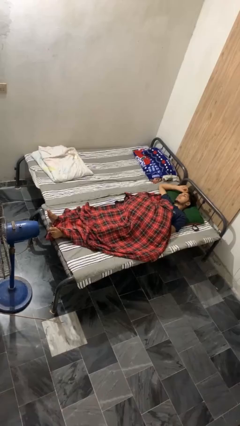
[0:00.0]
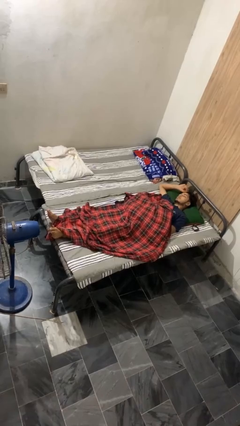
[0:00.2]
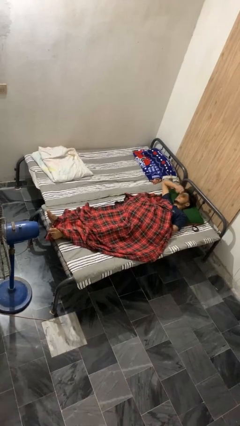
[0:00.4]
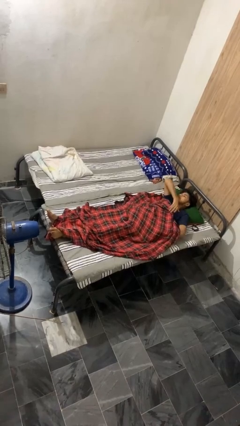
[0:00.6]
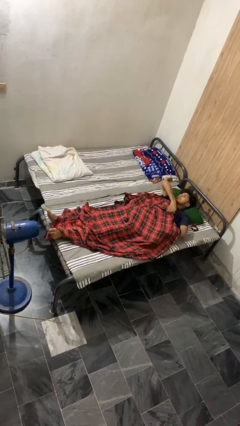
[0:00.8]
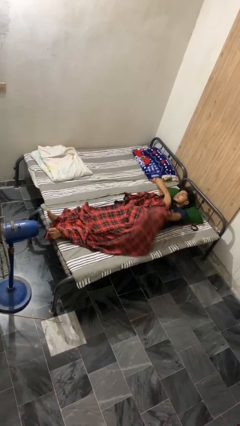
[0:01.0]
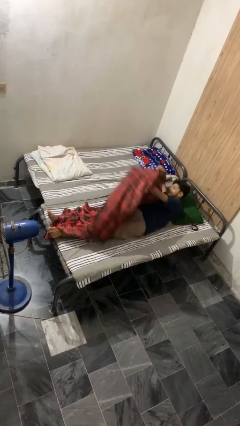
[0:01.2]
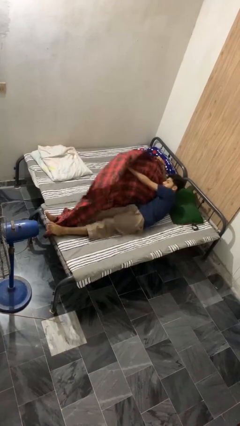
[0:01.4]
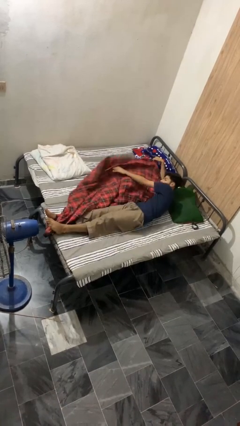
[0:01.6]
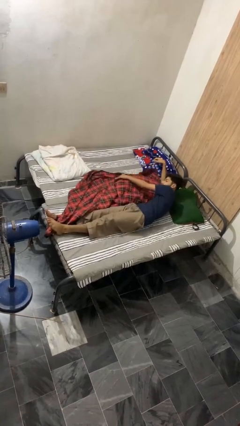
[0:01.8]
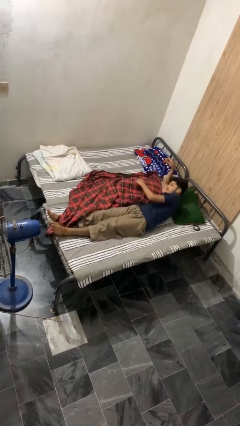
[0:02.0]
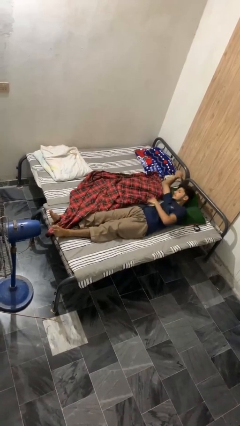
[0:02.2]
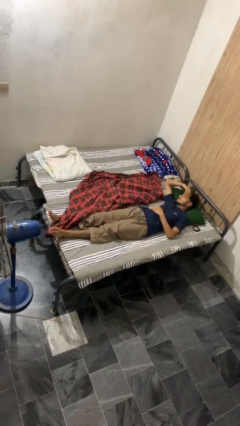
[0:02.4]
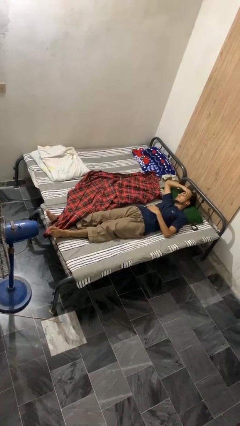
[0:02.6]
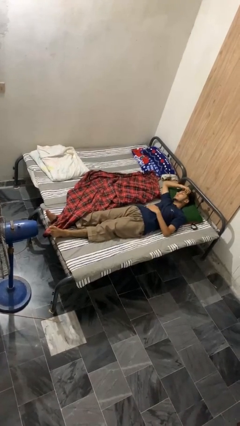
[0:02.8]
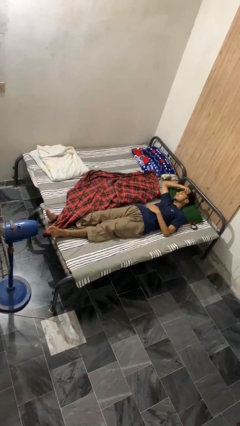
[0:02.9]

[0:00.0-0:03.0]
person uncovers with bedsheets

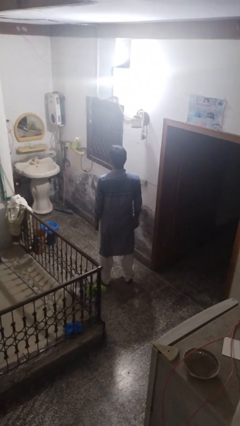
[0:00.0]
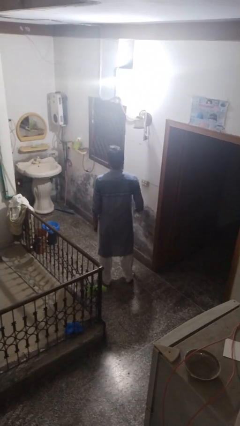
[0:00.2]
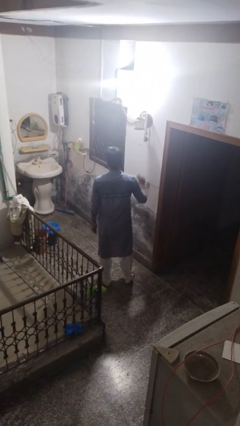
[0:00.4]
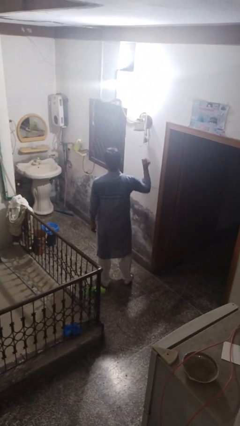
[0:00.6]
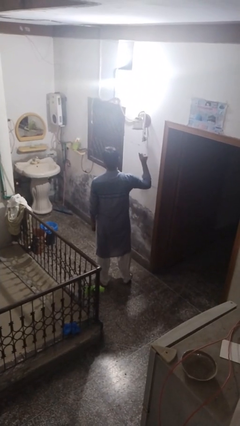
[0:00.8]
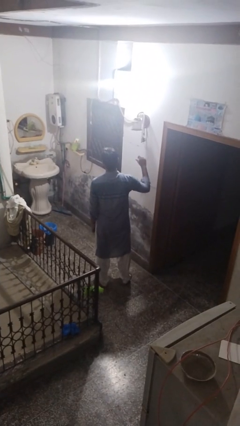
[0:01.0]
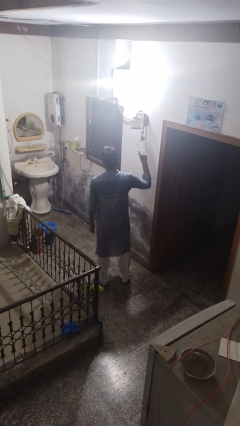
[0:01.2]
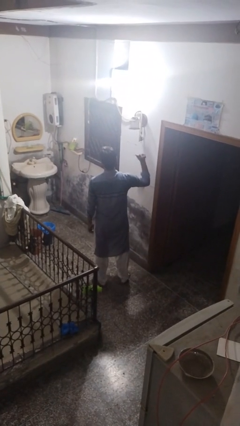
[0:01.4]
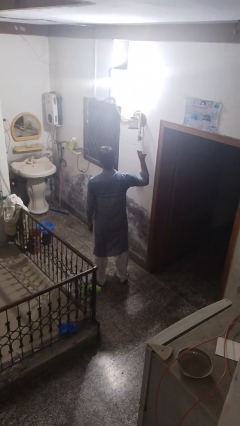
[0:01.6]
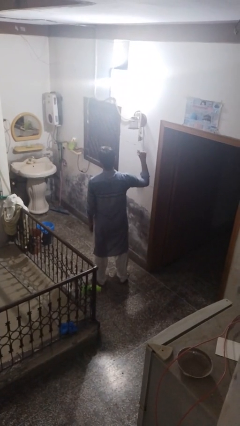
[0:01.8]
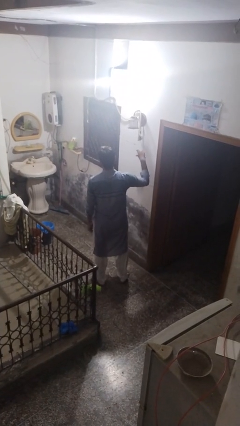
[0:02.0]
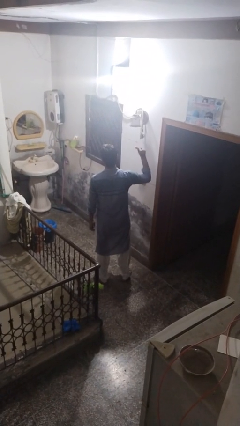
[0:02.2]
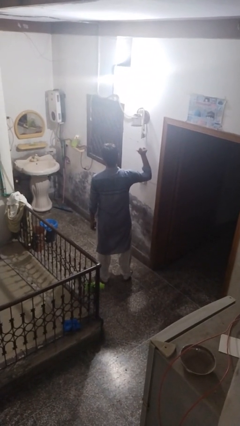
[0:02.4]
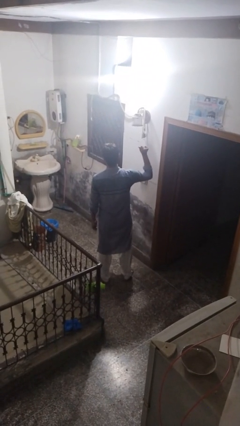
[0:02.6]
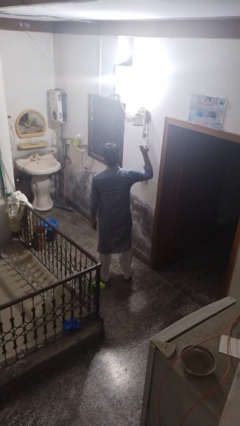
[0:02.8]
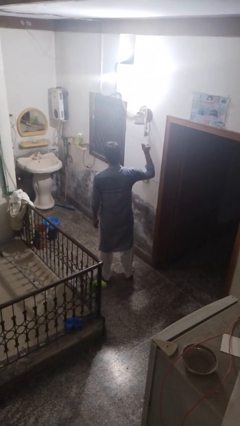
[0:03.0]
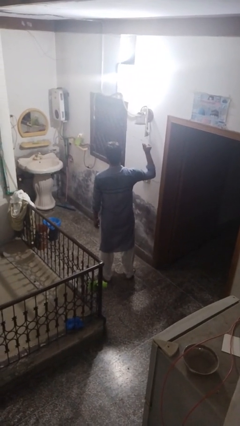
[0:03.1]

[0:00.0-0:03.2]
person snaps fingers

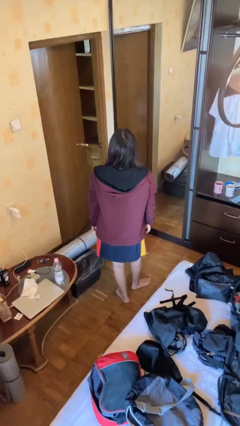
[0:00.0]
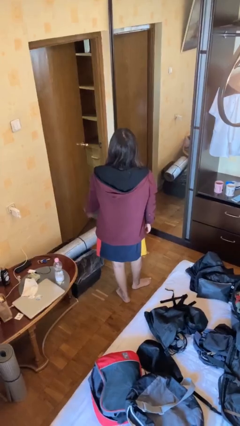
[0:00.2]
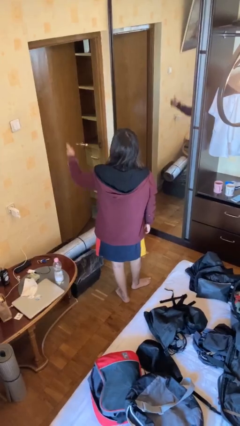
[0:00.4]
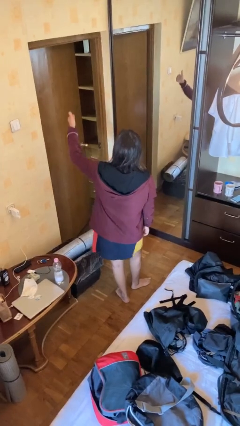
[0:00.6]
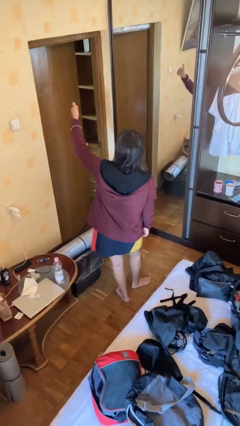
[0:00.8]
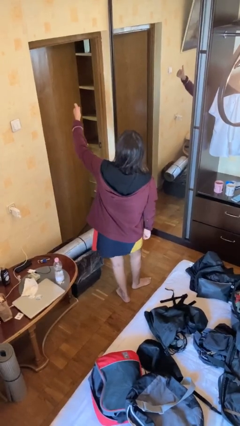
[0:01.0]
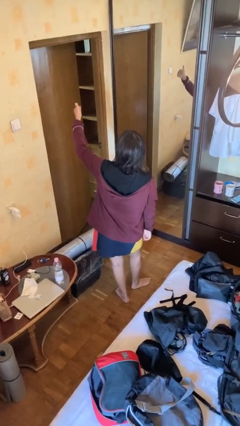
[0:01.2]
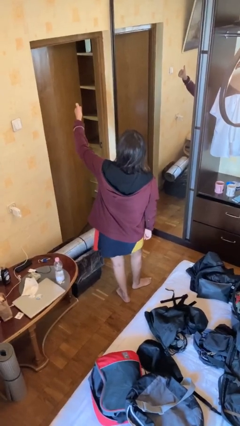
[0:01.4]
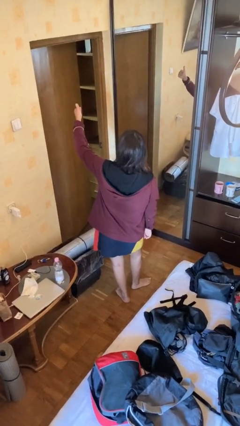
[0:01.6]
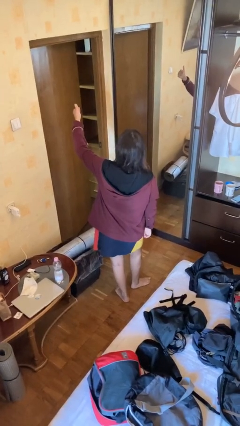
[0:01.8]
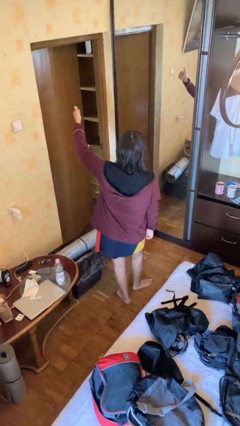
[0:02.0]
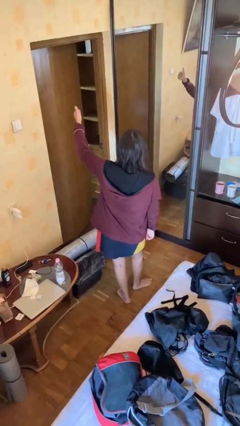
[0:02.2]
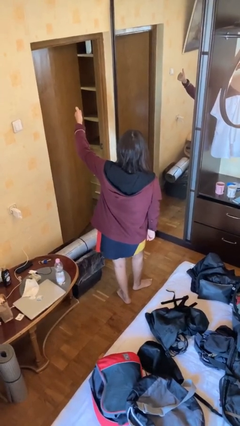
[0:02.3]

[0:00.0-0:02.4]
person gestures thumbs up

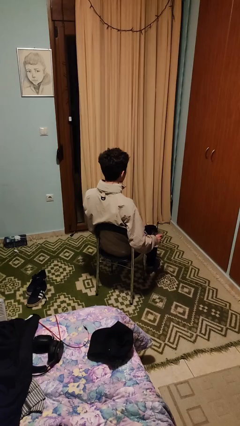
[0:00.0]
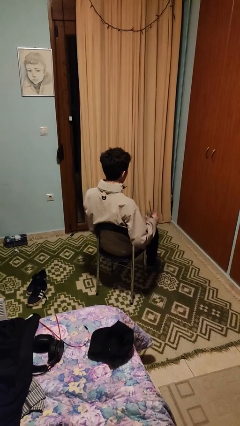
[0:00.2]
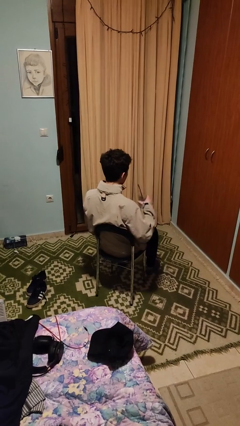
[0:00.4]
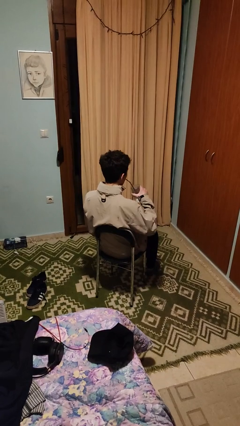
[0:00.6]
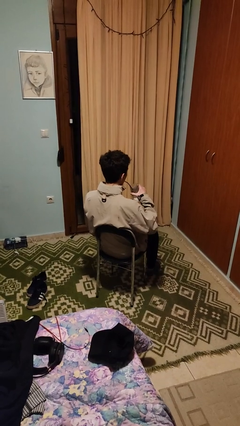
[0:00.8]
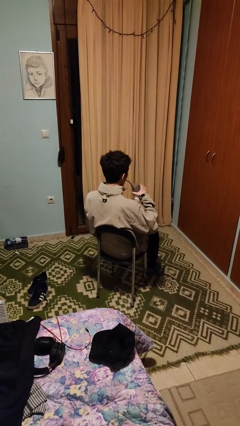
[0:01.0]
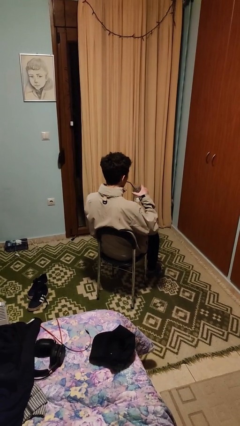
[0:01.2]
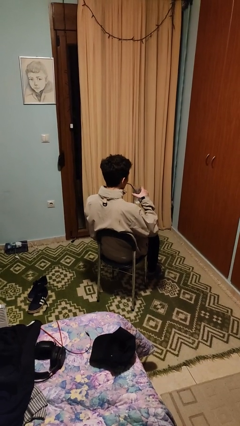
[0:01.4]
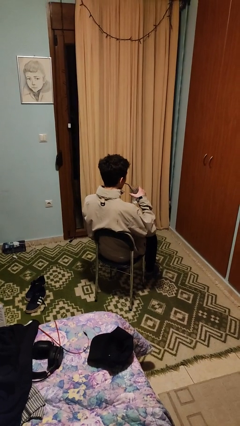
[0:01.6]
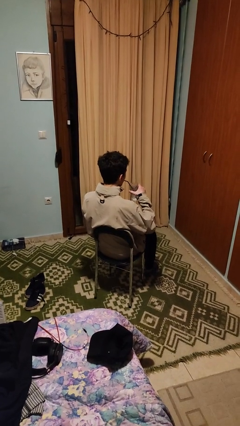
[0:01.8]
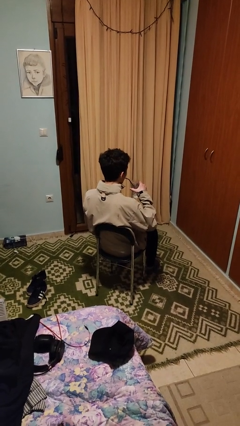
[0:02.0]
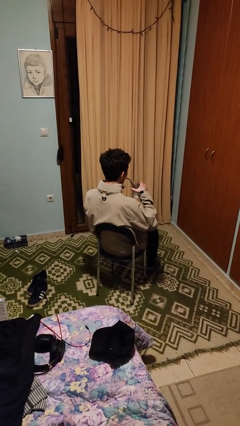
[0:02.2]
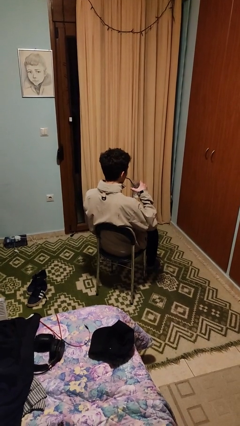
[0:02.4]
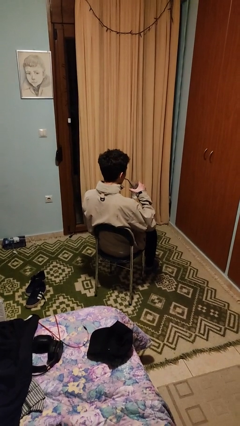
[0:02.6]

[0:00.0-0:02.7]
person drinks from straw

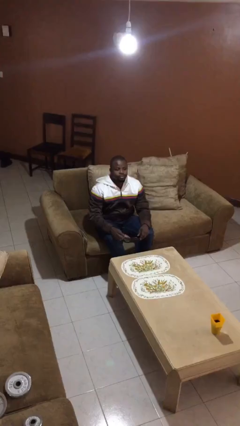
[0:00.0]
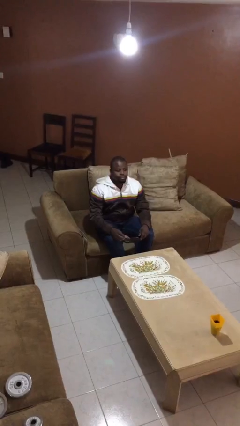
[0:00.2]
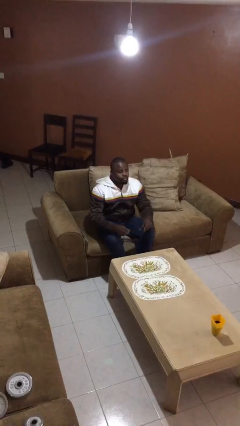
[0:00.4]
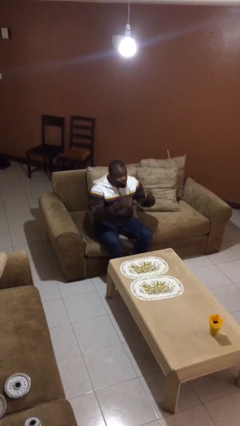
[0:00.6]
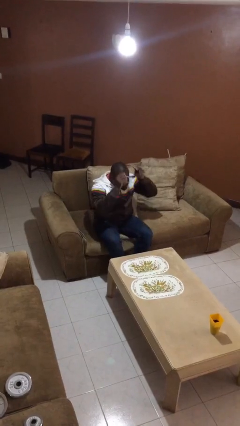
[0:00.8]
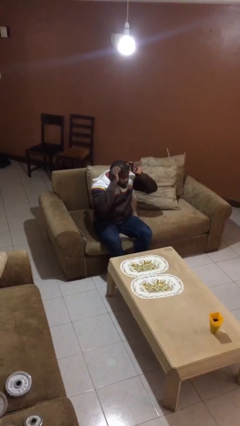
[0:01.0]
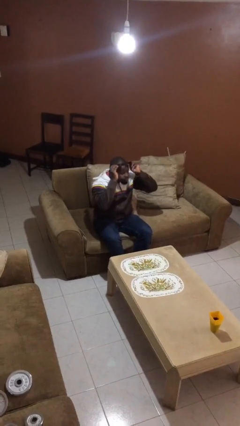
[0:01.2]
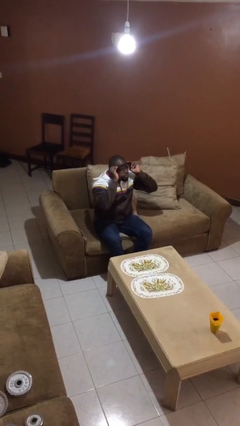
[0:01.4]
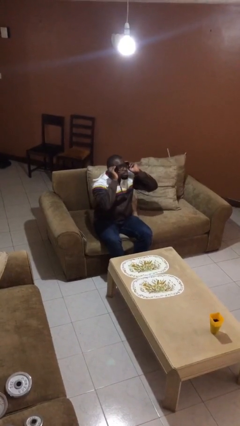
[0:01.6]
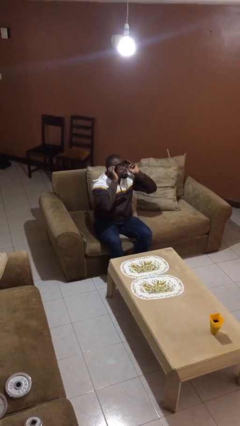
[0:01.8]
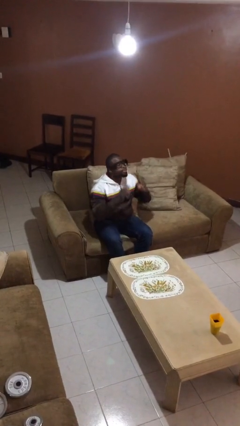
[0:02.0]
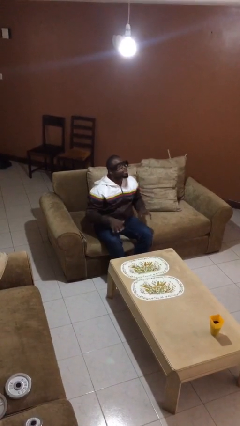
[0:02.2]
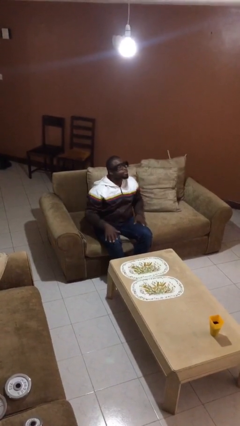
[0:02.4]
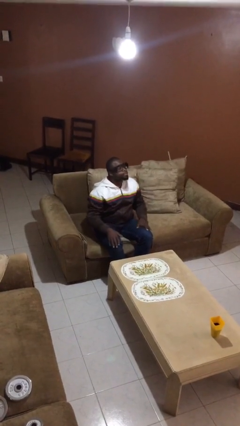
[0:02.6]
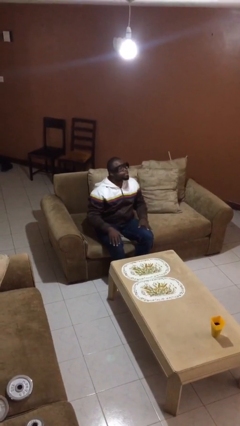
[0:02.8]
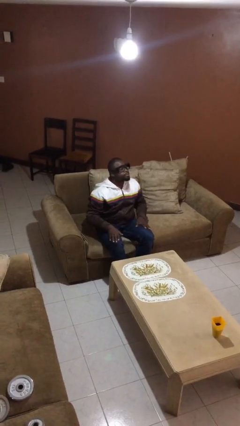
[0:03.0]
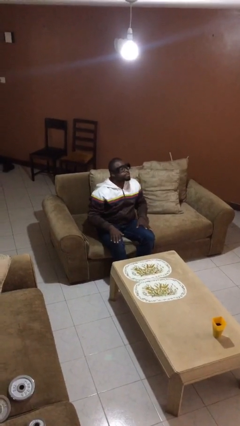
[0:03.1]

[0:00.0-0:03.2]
person puts on glasses

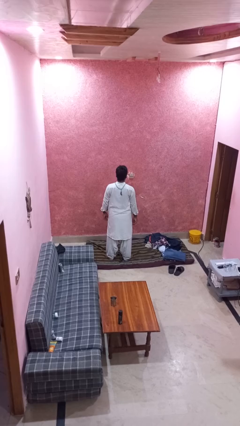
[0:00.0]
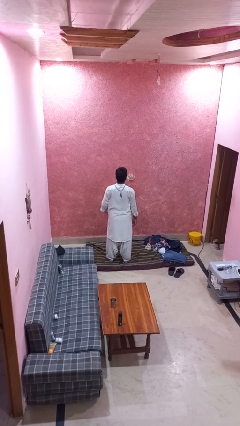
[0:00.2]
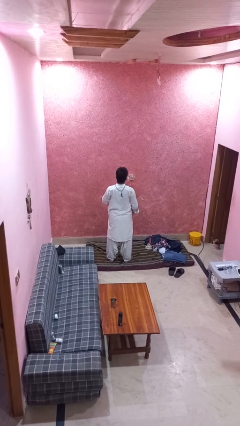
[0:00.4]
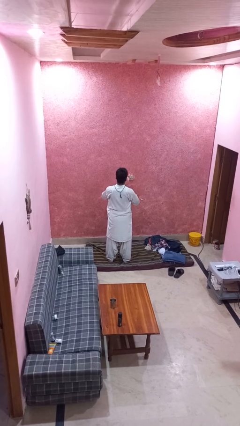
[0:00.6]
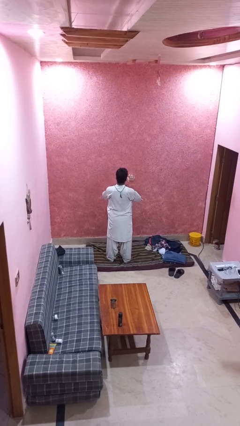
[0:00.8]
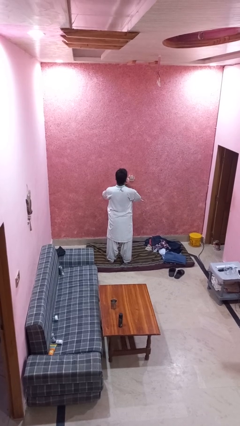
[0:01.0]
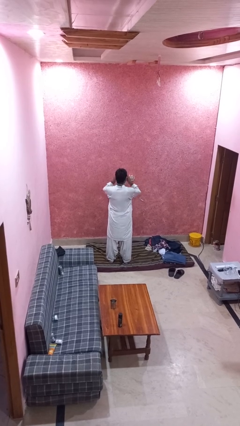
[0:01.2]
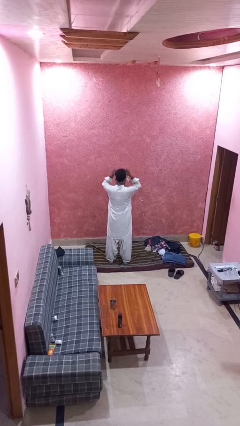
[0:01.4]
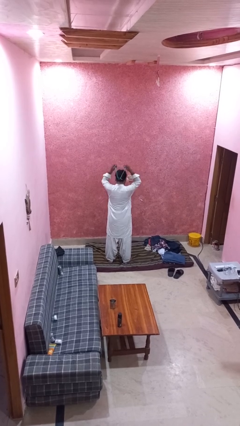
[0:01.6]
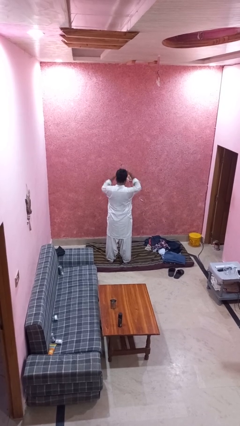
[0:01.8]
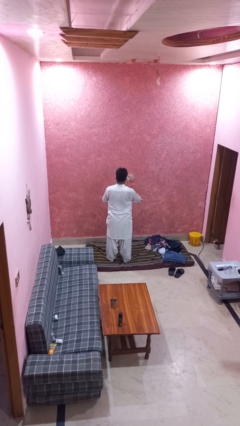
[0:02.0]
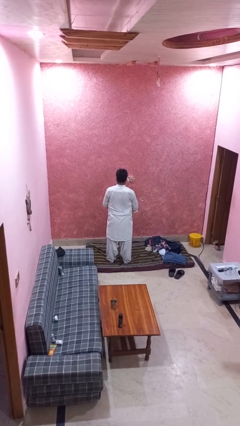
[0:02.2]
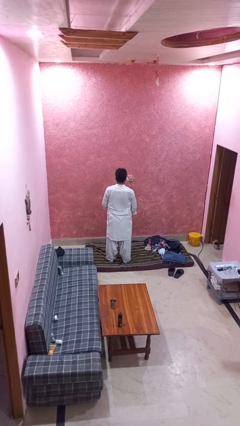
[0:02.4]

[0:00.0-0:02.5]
person takes off necklace

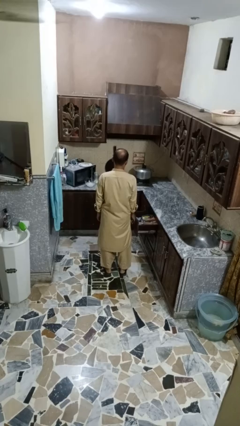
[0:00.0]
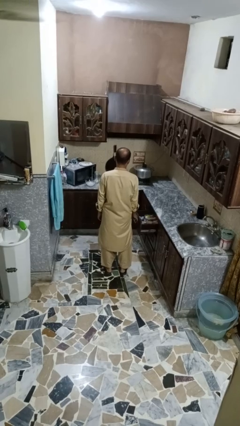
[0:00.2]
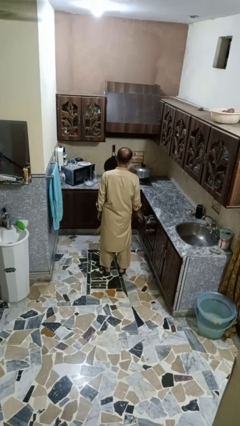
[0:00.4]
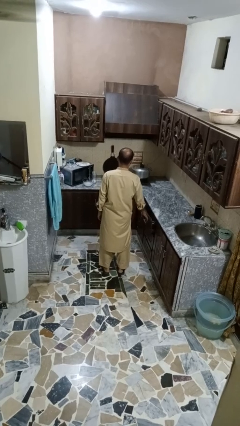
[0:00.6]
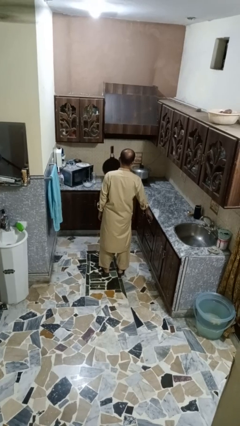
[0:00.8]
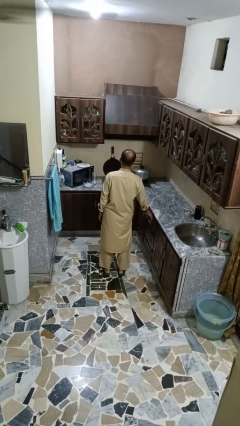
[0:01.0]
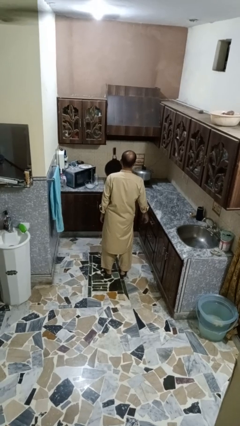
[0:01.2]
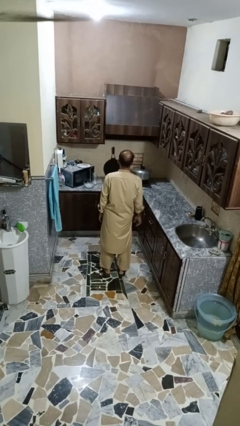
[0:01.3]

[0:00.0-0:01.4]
person closes kitchen drawer
